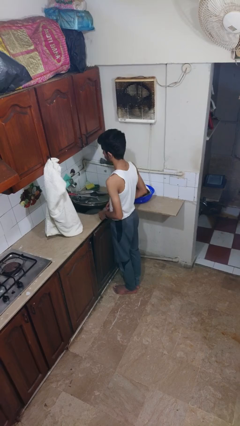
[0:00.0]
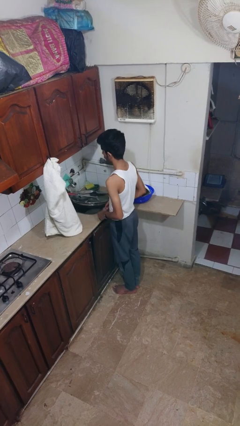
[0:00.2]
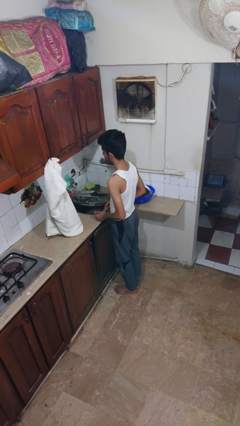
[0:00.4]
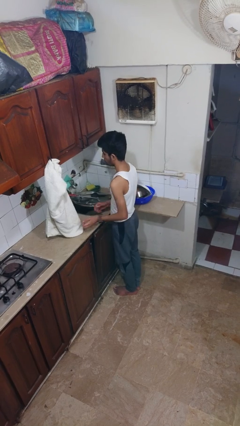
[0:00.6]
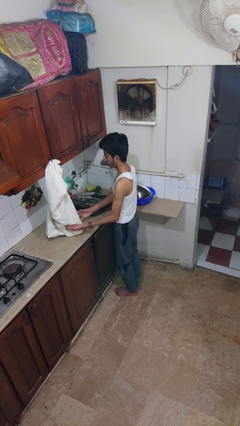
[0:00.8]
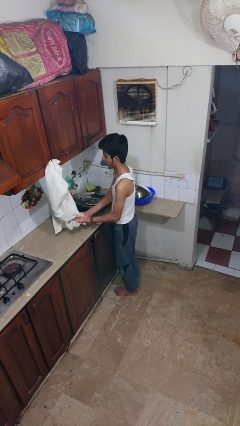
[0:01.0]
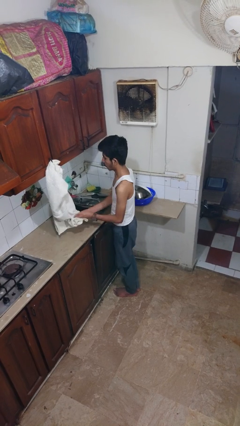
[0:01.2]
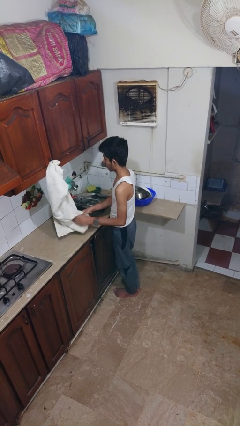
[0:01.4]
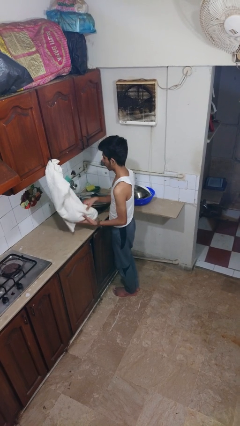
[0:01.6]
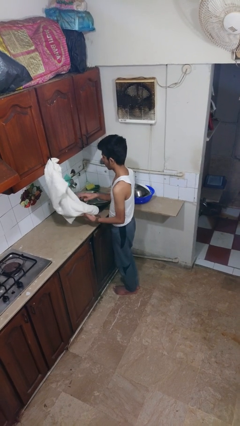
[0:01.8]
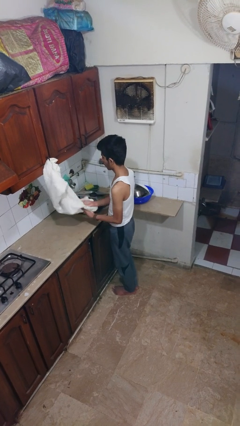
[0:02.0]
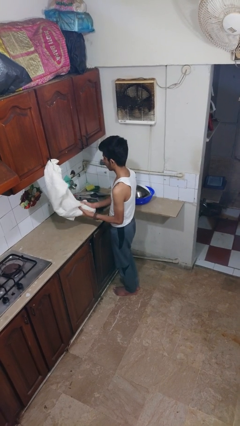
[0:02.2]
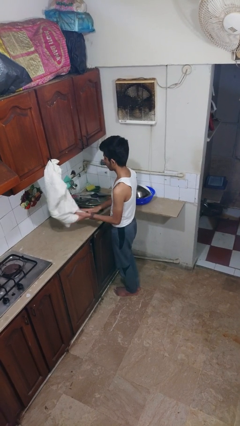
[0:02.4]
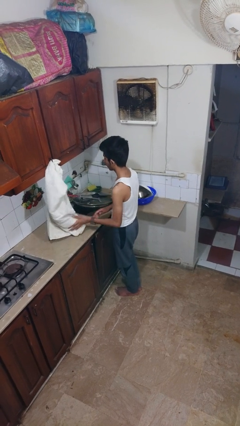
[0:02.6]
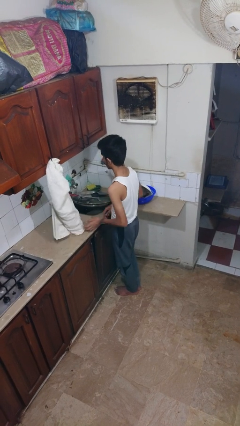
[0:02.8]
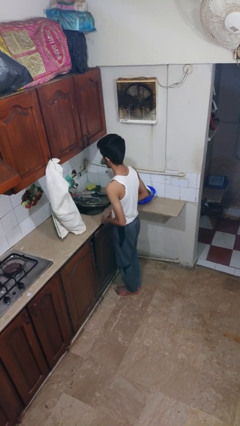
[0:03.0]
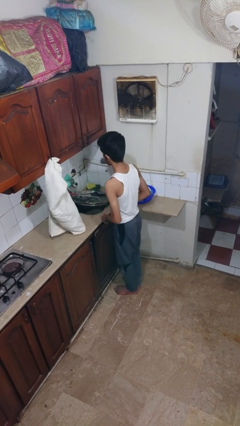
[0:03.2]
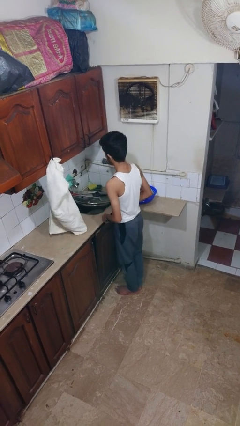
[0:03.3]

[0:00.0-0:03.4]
person dries hands with towel

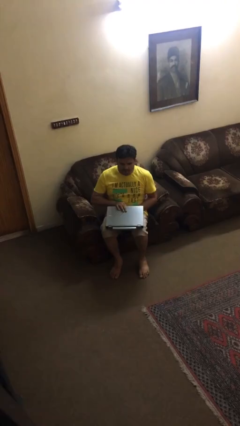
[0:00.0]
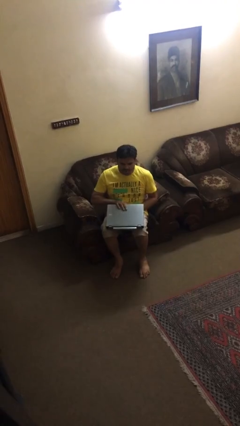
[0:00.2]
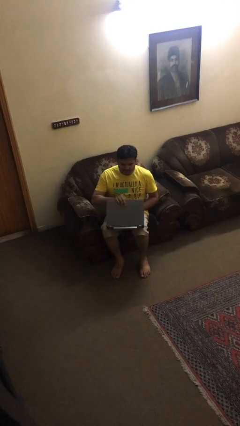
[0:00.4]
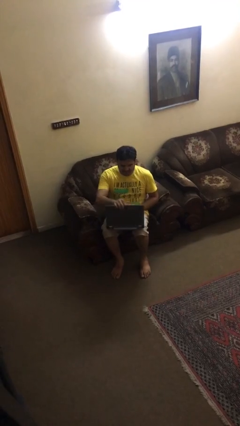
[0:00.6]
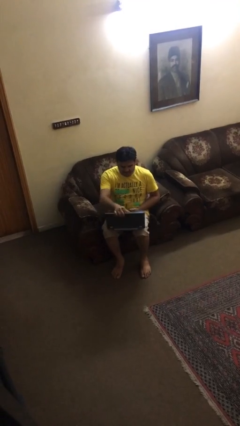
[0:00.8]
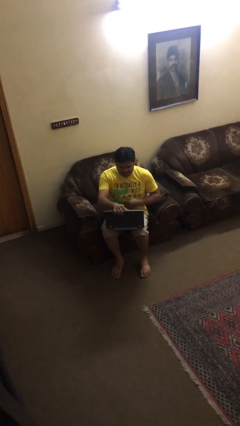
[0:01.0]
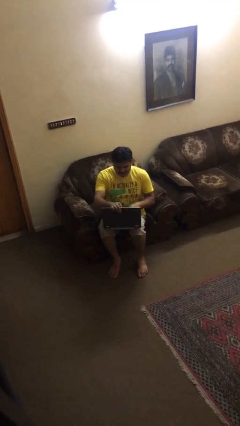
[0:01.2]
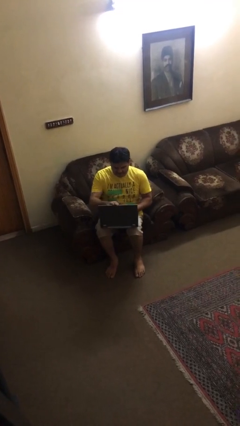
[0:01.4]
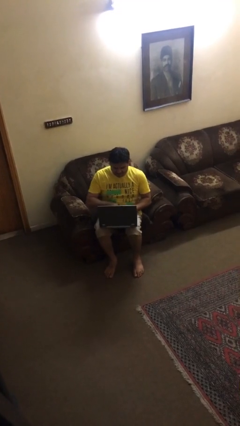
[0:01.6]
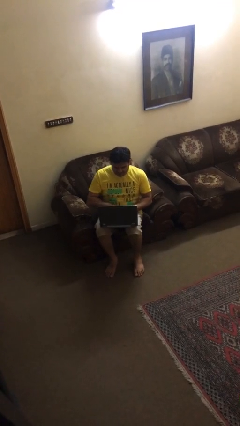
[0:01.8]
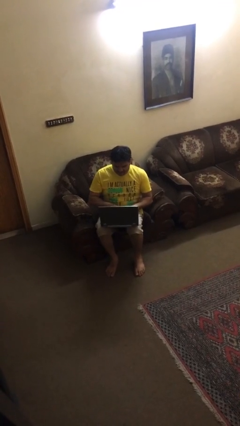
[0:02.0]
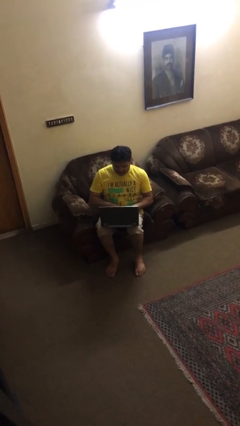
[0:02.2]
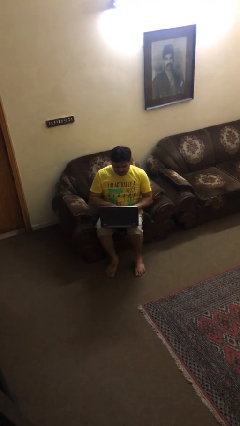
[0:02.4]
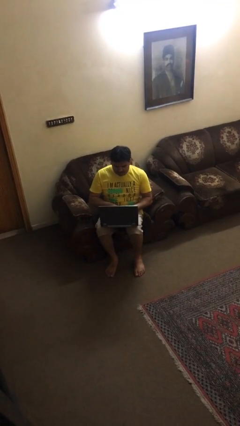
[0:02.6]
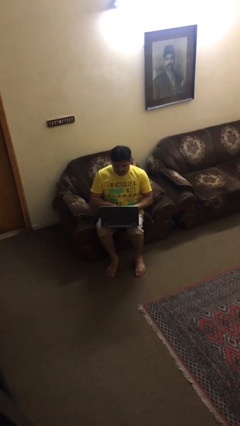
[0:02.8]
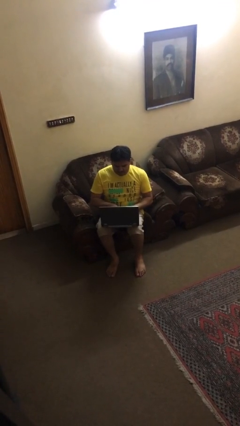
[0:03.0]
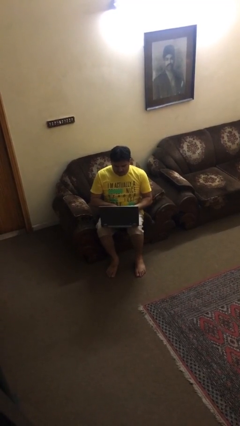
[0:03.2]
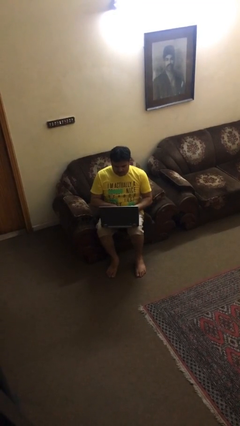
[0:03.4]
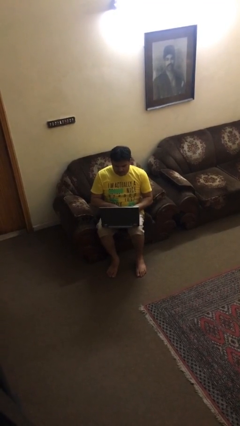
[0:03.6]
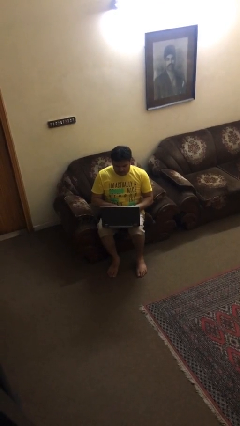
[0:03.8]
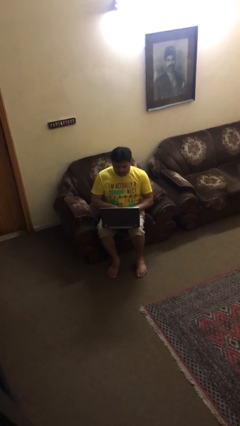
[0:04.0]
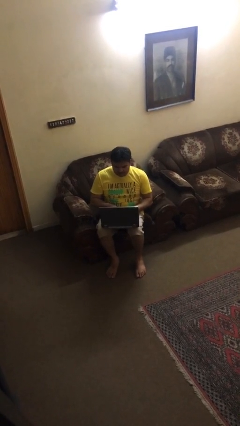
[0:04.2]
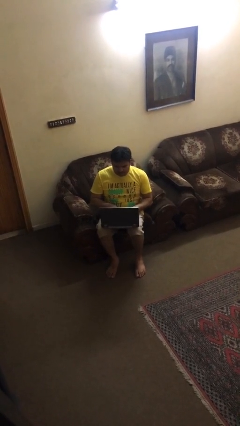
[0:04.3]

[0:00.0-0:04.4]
person interacts with laptop

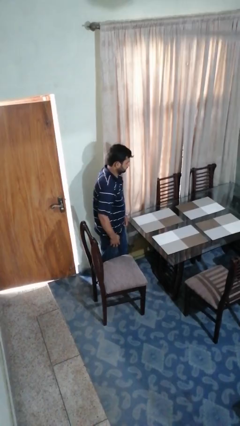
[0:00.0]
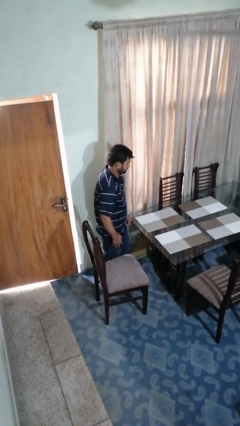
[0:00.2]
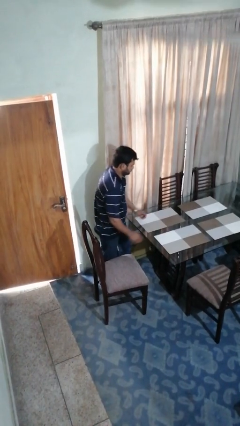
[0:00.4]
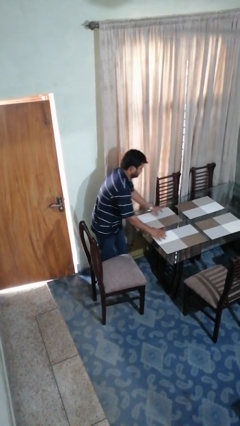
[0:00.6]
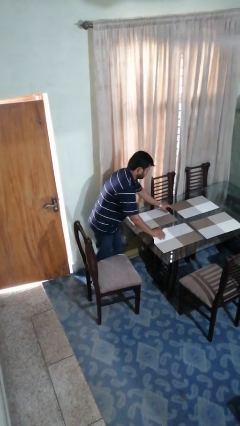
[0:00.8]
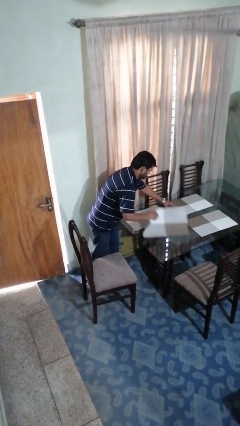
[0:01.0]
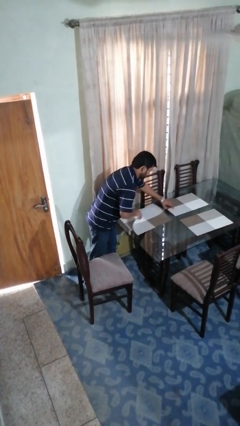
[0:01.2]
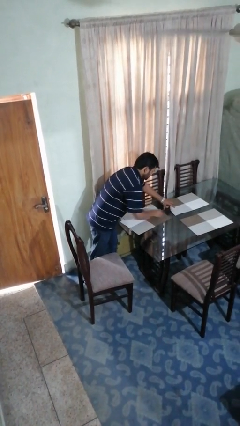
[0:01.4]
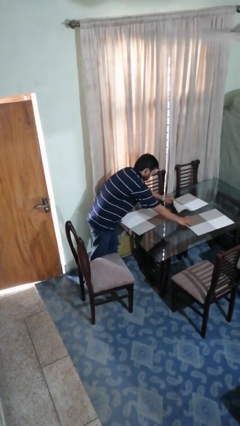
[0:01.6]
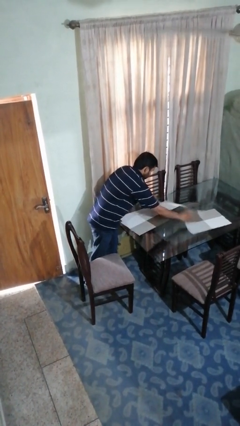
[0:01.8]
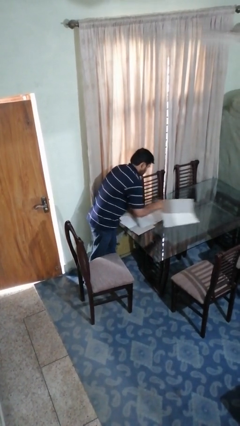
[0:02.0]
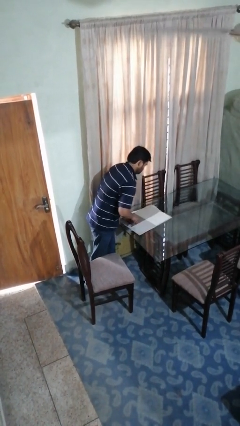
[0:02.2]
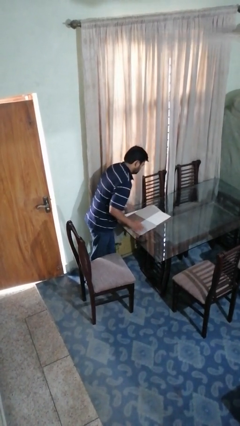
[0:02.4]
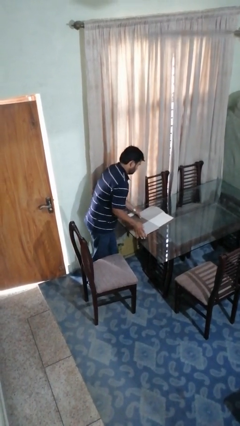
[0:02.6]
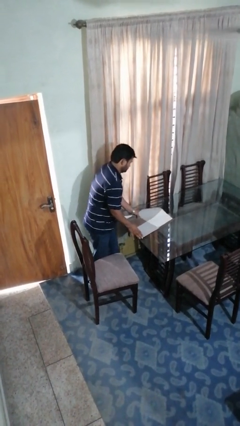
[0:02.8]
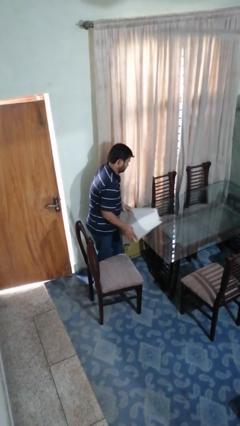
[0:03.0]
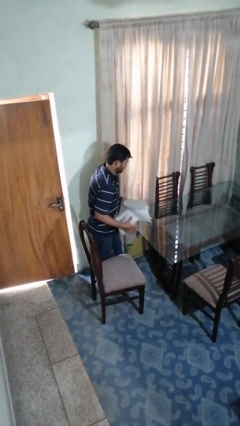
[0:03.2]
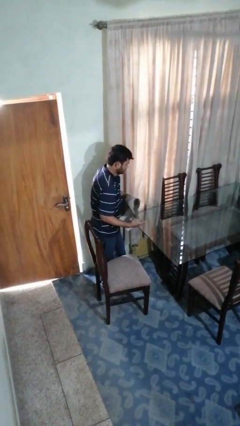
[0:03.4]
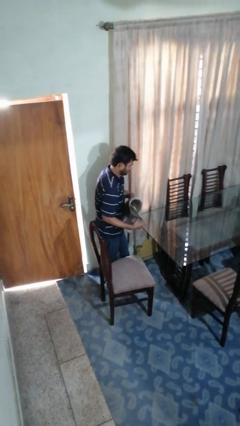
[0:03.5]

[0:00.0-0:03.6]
person folds tablecloth

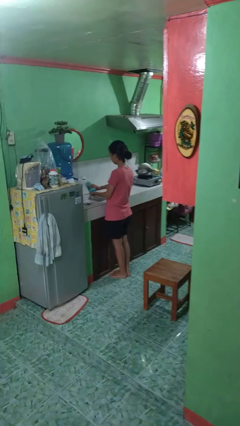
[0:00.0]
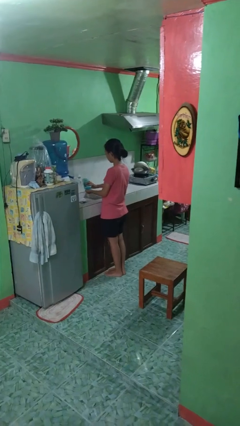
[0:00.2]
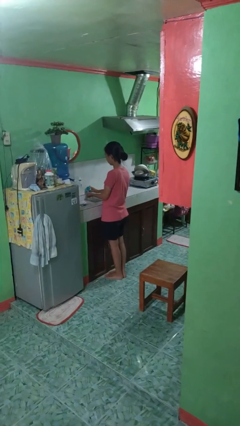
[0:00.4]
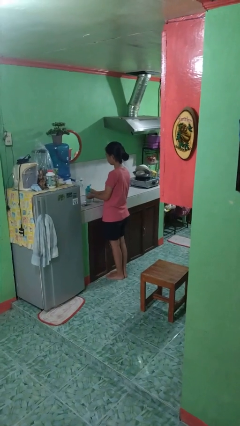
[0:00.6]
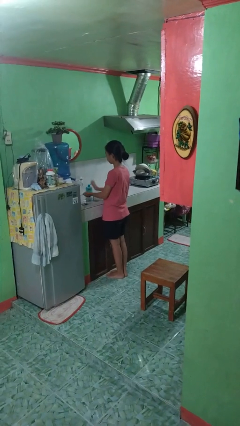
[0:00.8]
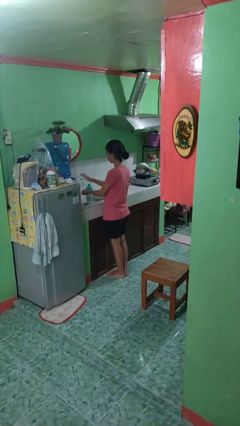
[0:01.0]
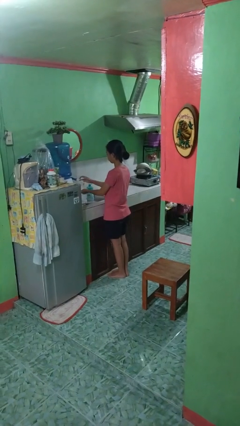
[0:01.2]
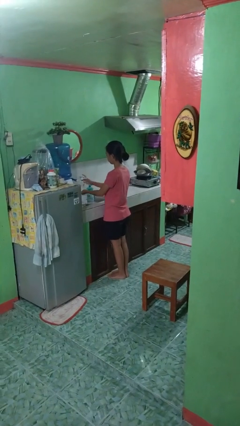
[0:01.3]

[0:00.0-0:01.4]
person washes hands

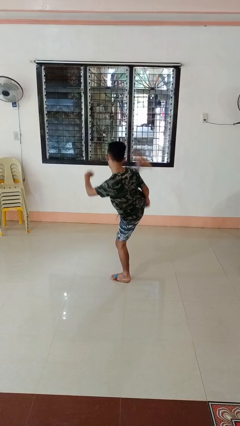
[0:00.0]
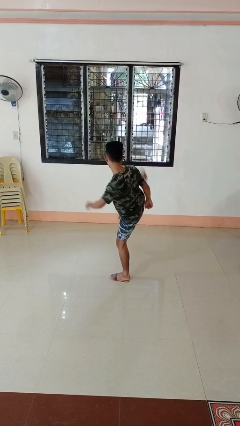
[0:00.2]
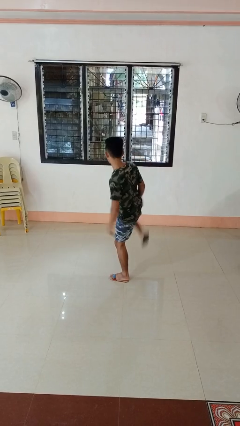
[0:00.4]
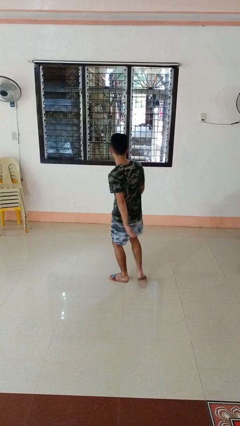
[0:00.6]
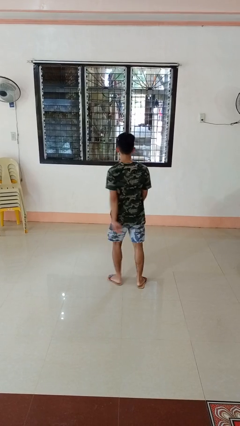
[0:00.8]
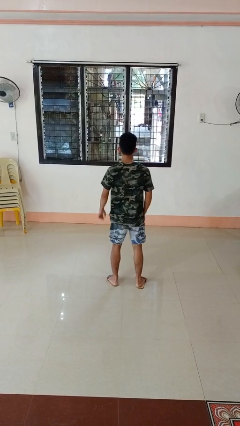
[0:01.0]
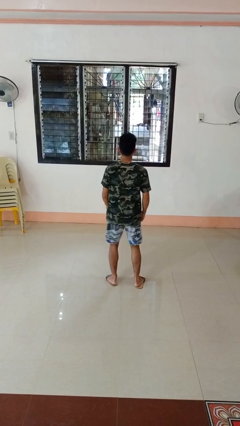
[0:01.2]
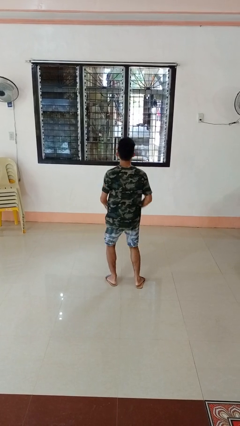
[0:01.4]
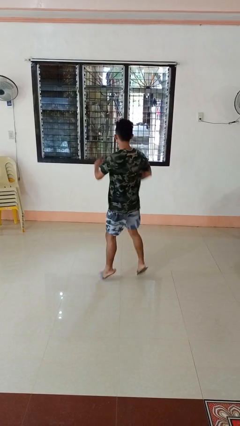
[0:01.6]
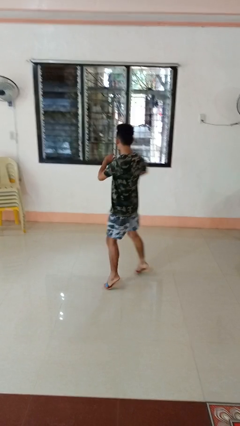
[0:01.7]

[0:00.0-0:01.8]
person karate kicks

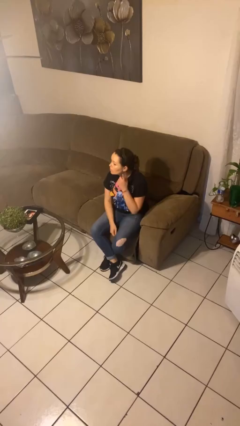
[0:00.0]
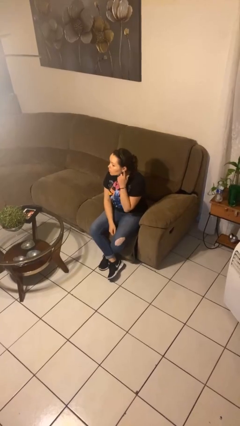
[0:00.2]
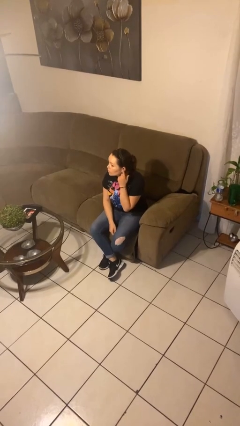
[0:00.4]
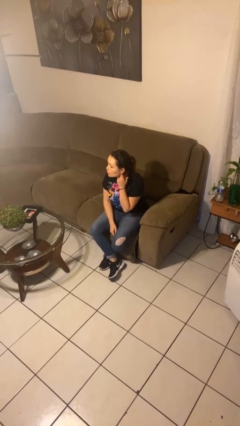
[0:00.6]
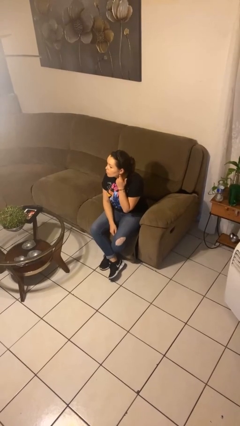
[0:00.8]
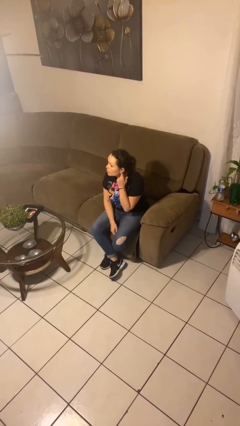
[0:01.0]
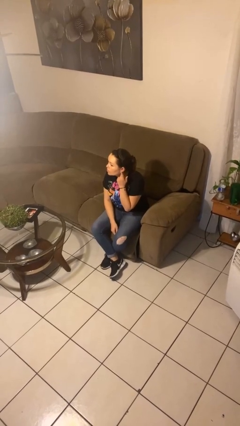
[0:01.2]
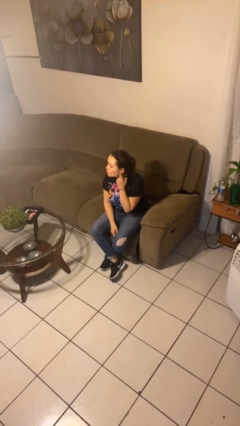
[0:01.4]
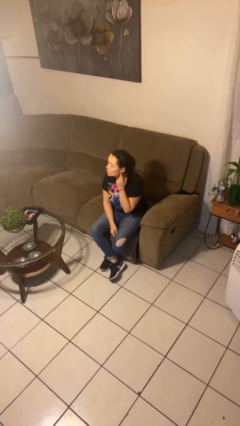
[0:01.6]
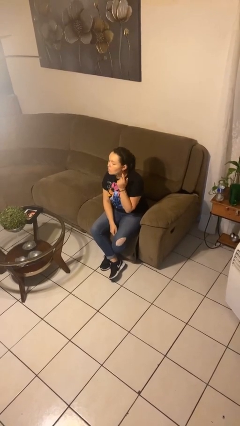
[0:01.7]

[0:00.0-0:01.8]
person gestures listen closely

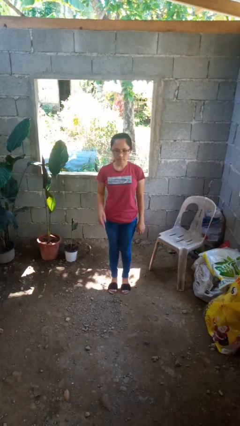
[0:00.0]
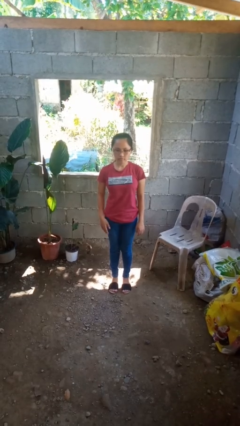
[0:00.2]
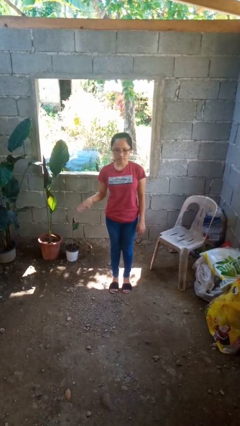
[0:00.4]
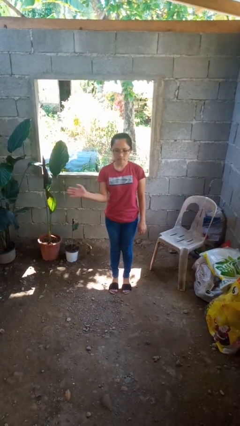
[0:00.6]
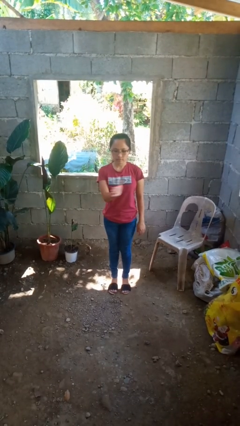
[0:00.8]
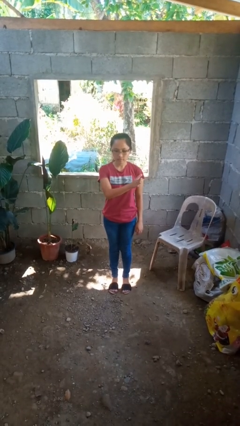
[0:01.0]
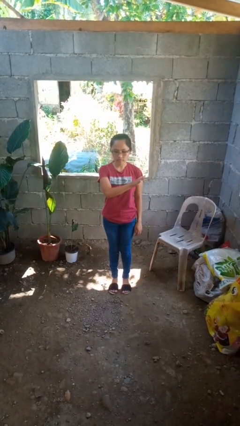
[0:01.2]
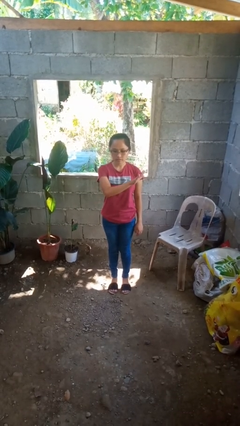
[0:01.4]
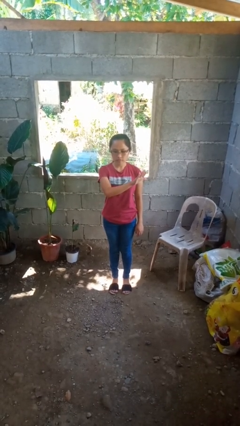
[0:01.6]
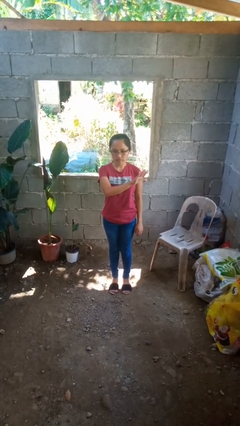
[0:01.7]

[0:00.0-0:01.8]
person gestures swipe left
